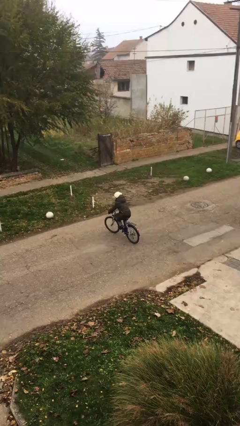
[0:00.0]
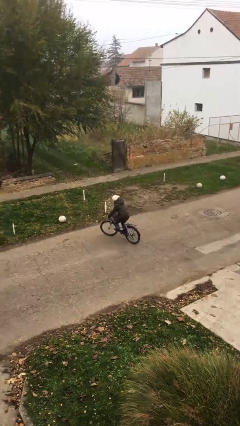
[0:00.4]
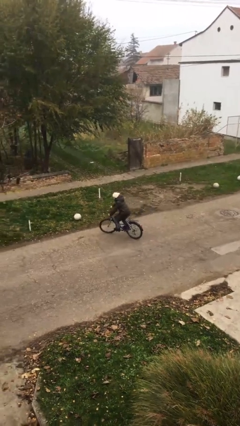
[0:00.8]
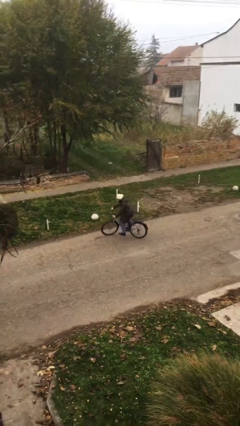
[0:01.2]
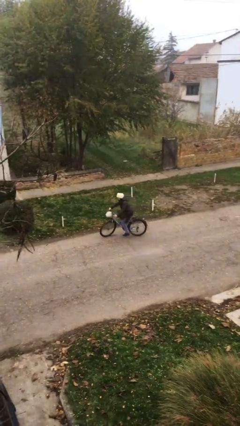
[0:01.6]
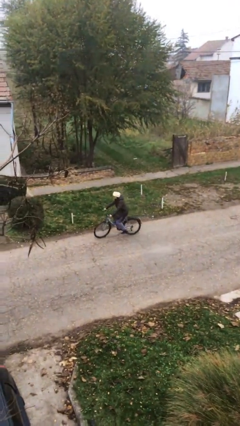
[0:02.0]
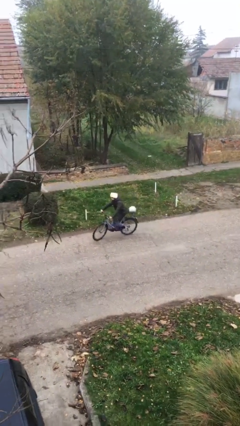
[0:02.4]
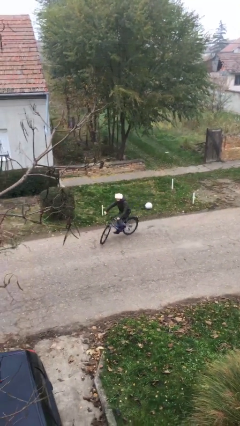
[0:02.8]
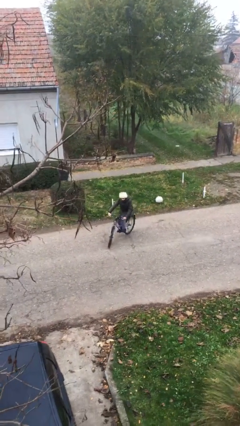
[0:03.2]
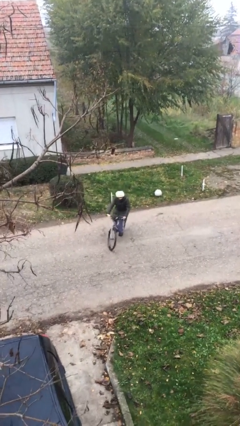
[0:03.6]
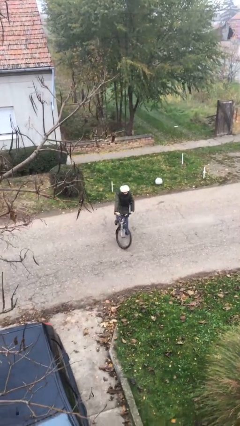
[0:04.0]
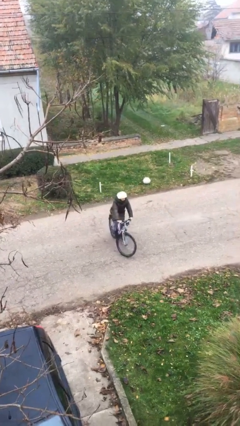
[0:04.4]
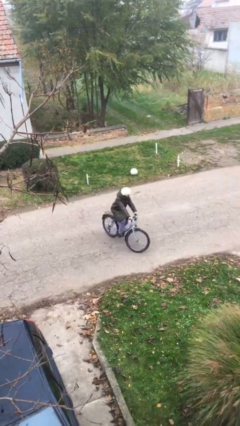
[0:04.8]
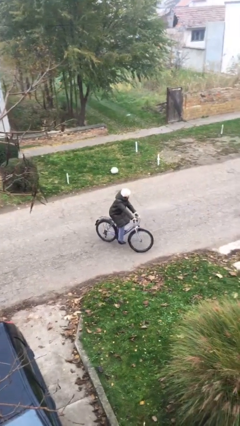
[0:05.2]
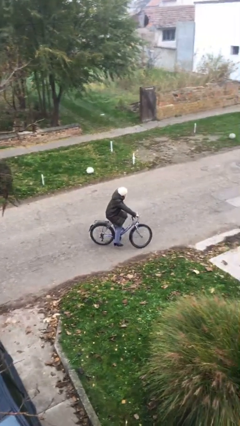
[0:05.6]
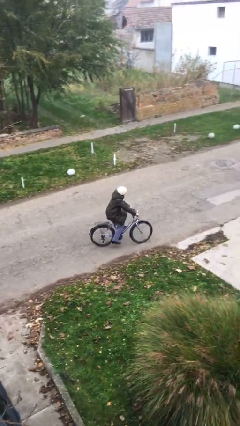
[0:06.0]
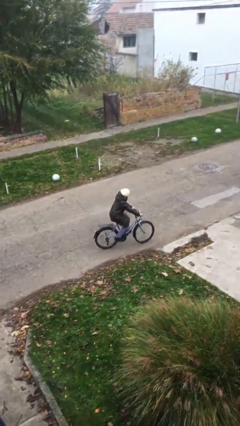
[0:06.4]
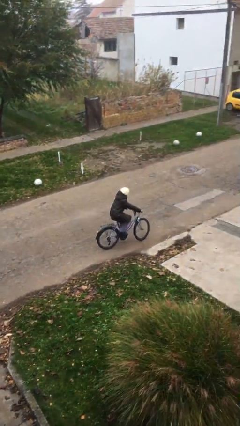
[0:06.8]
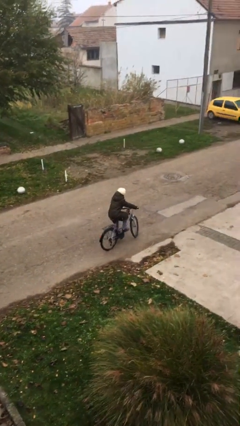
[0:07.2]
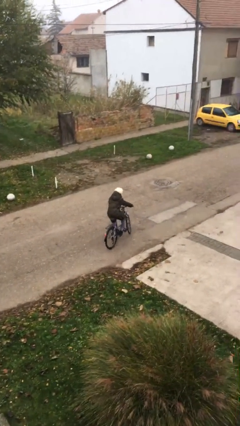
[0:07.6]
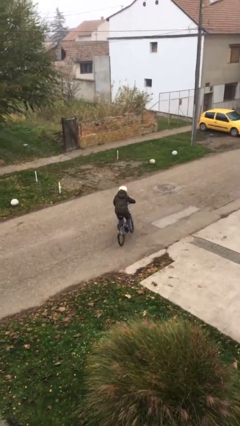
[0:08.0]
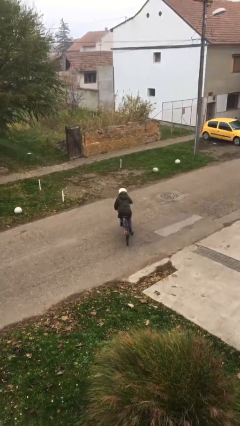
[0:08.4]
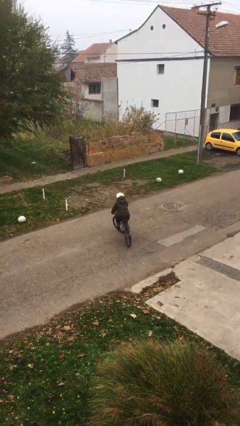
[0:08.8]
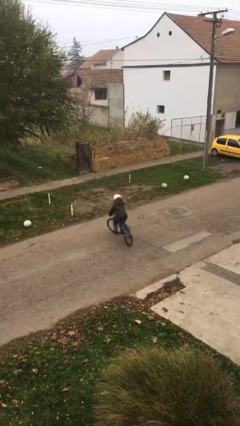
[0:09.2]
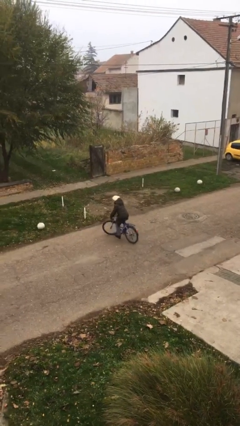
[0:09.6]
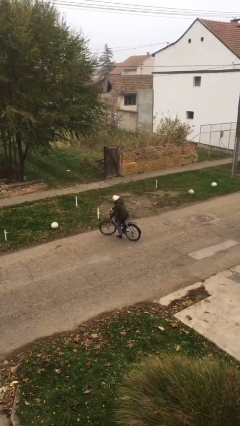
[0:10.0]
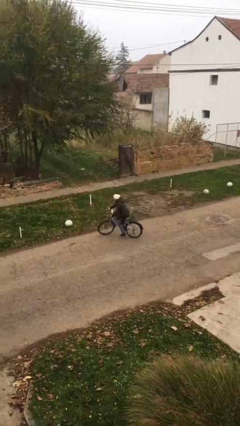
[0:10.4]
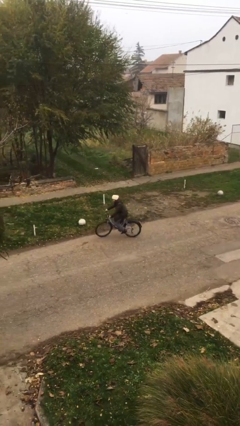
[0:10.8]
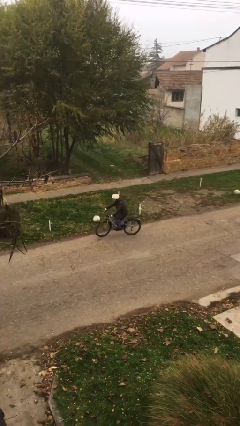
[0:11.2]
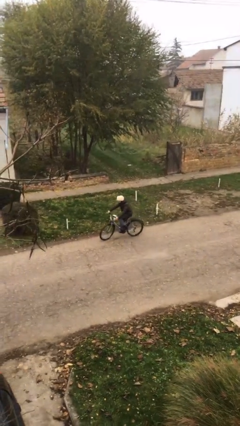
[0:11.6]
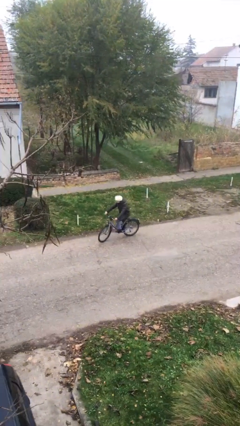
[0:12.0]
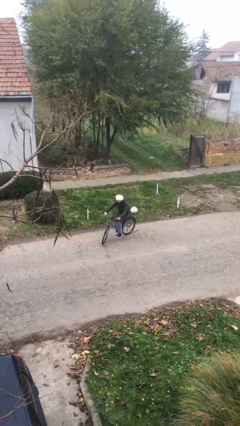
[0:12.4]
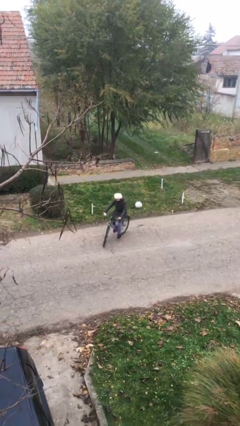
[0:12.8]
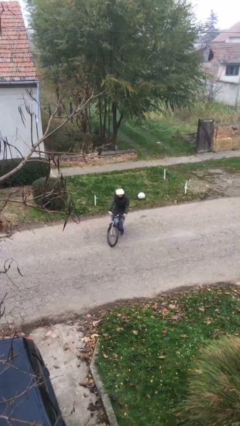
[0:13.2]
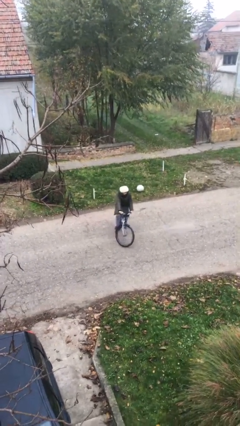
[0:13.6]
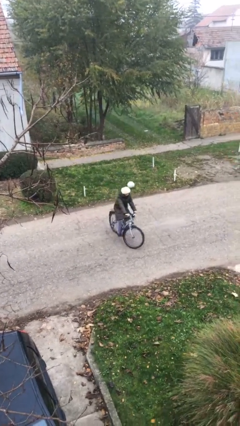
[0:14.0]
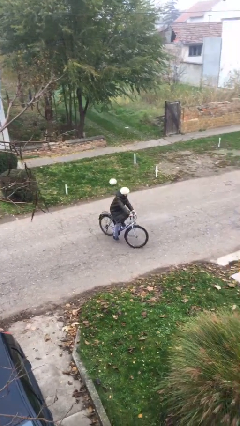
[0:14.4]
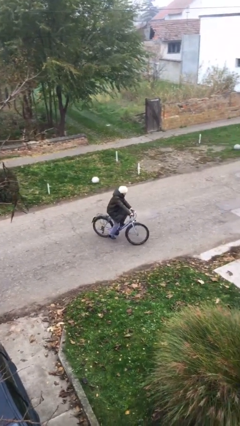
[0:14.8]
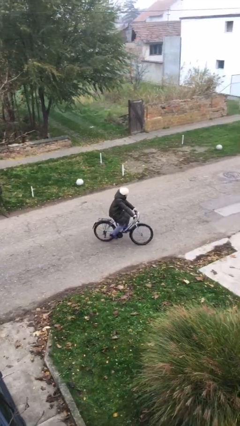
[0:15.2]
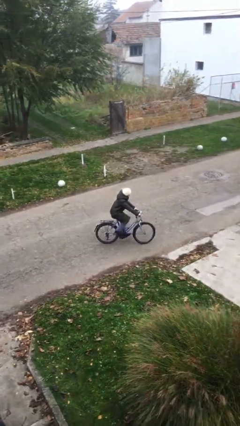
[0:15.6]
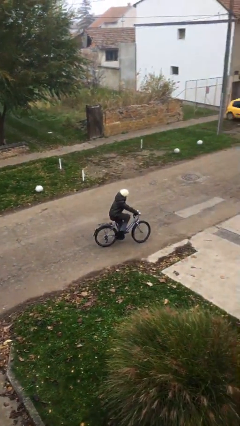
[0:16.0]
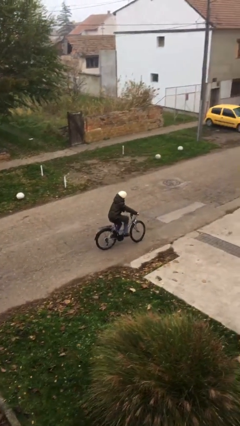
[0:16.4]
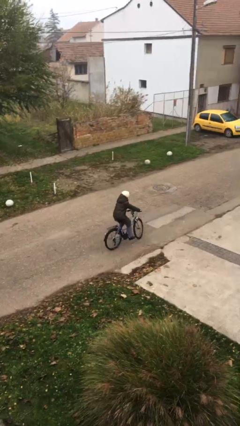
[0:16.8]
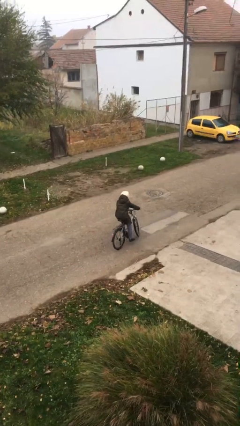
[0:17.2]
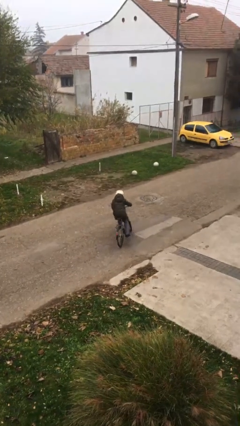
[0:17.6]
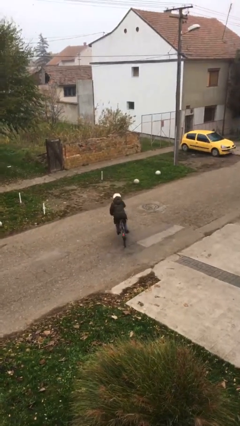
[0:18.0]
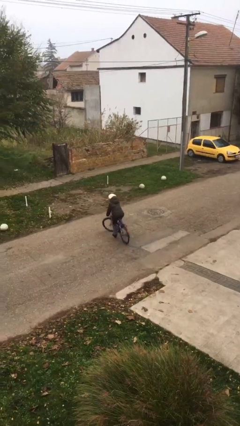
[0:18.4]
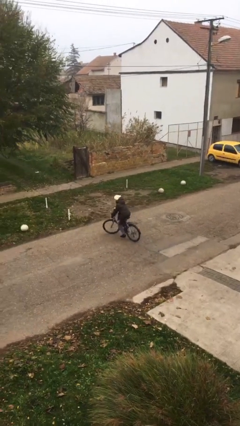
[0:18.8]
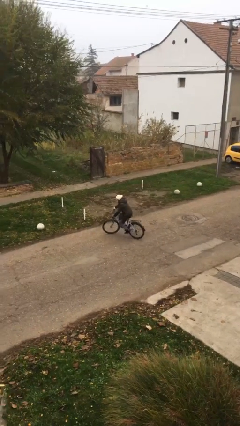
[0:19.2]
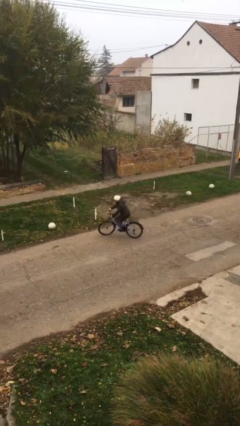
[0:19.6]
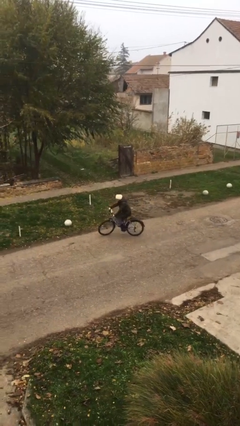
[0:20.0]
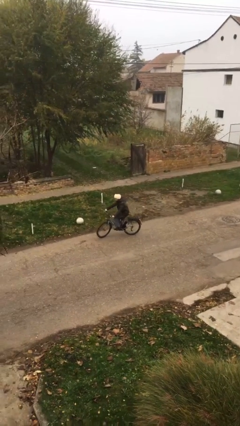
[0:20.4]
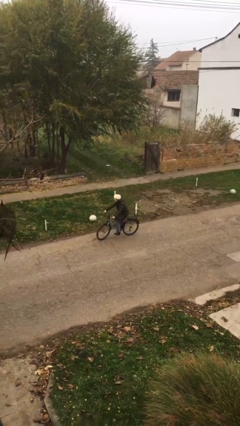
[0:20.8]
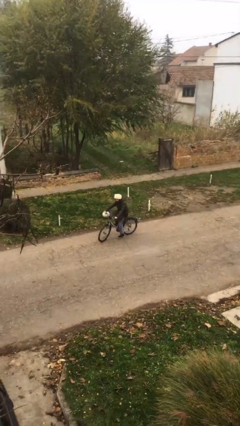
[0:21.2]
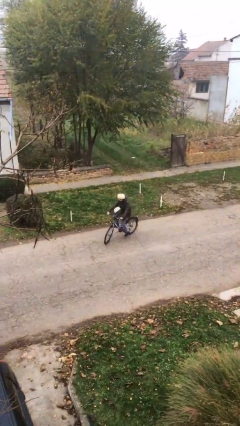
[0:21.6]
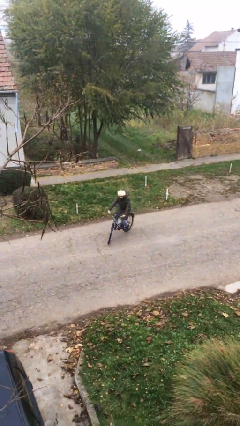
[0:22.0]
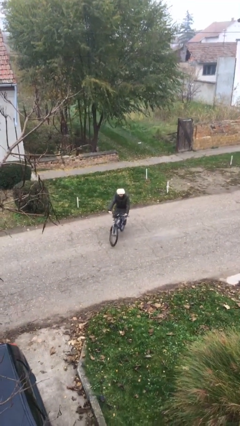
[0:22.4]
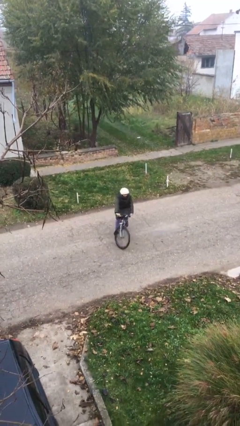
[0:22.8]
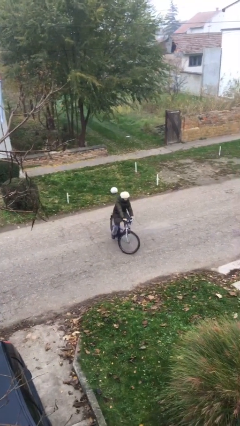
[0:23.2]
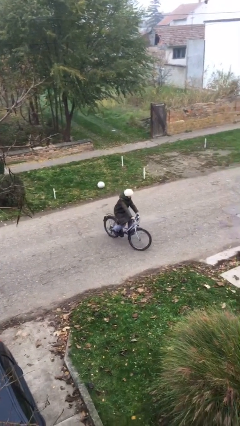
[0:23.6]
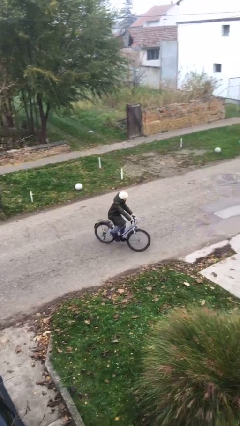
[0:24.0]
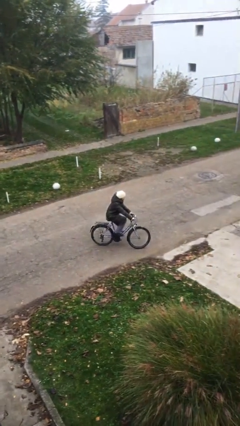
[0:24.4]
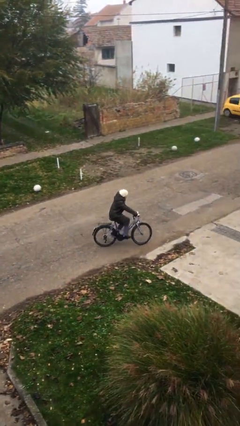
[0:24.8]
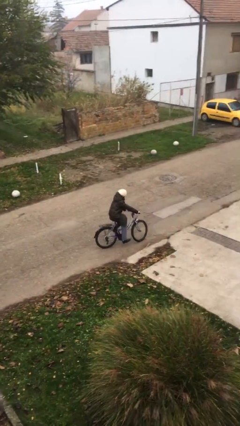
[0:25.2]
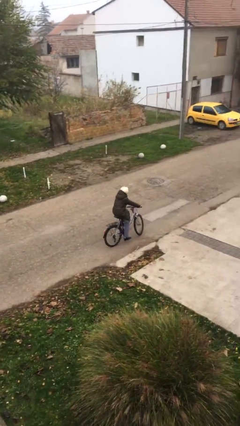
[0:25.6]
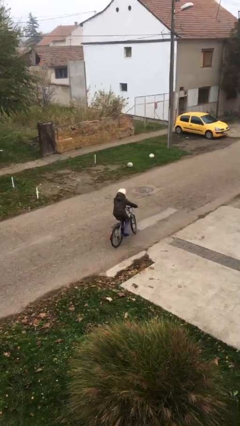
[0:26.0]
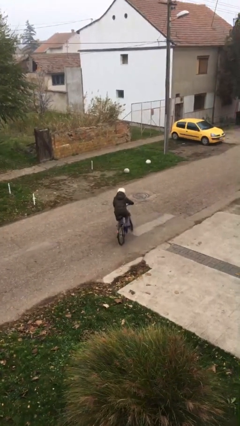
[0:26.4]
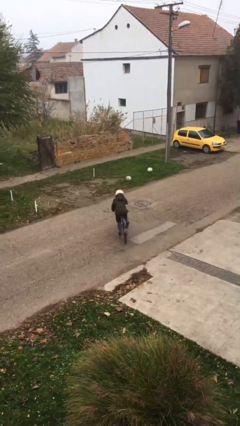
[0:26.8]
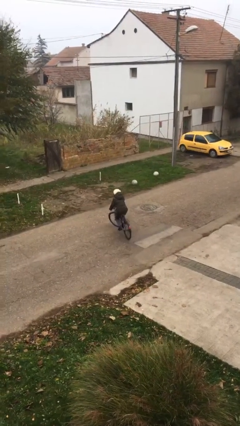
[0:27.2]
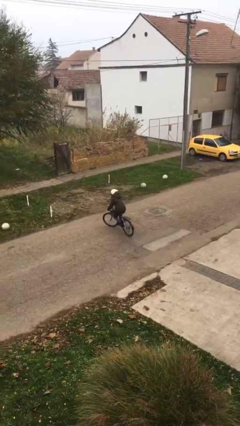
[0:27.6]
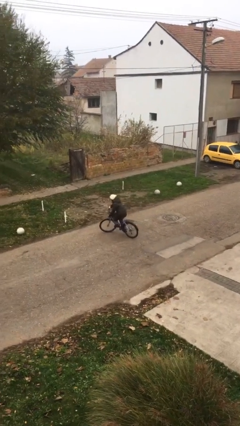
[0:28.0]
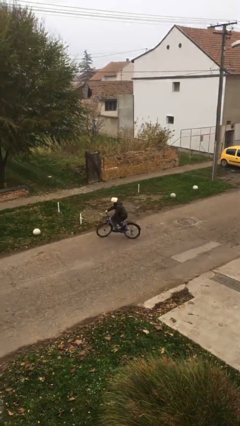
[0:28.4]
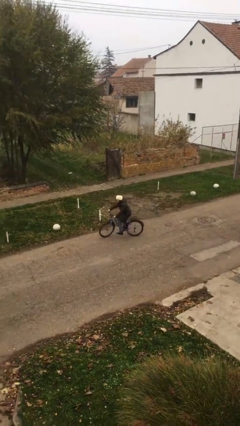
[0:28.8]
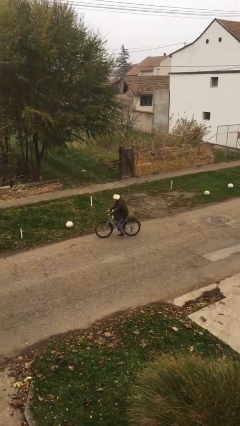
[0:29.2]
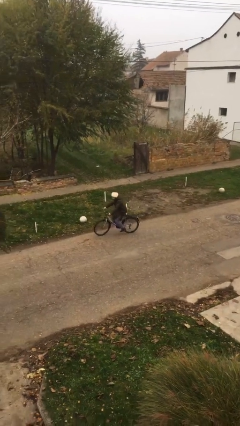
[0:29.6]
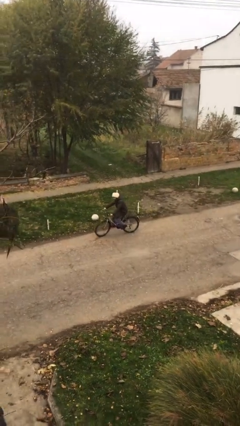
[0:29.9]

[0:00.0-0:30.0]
person rides bicycle

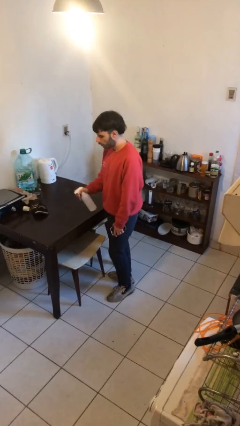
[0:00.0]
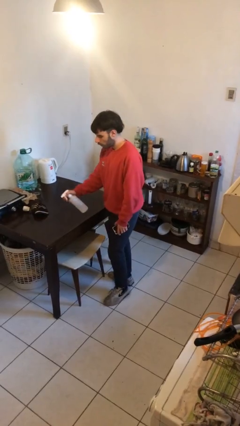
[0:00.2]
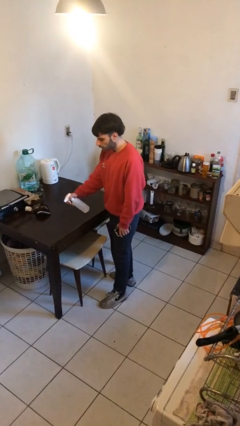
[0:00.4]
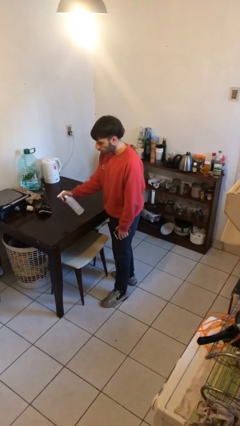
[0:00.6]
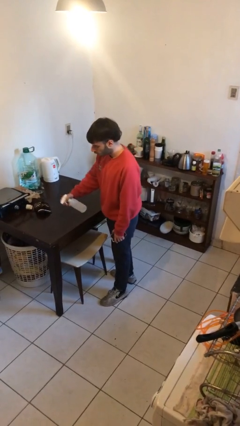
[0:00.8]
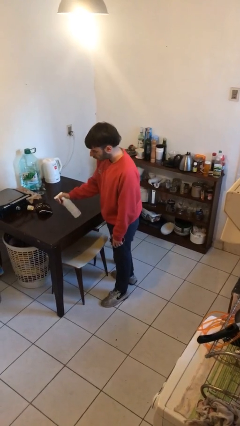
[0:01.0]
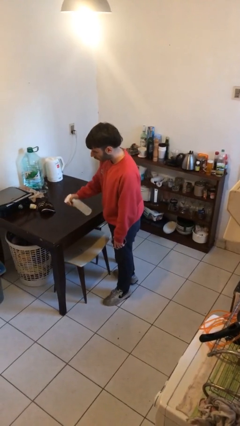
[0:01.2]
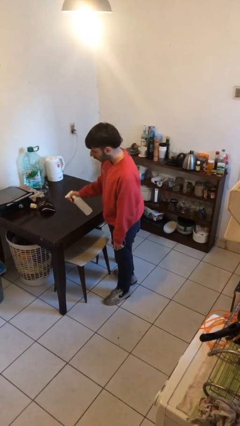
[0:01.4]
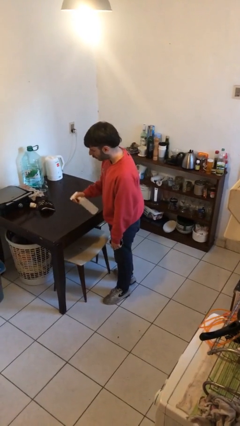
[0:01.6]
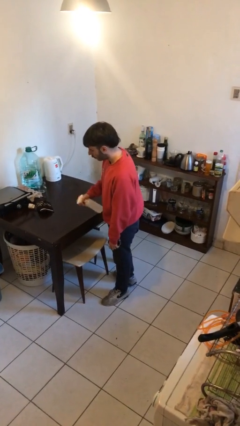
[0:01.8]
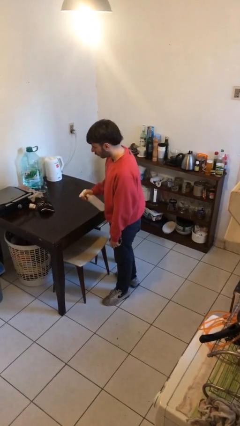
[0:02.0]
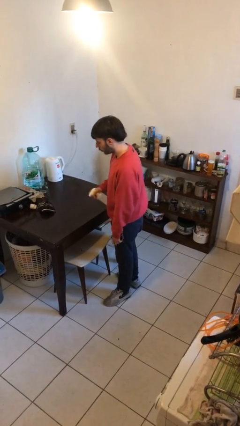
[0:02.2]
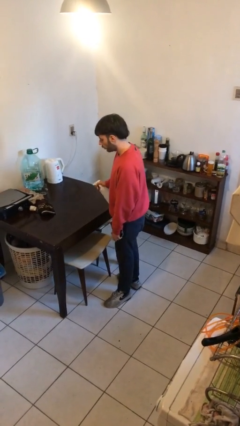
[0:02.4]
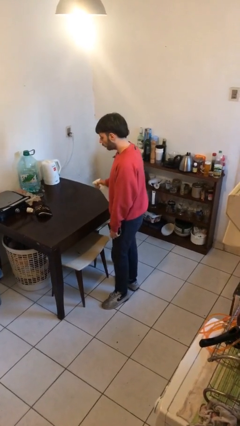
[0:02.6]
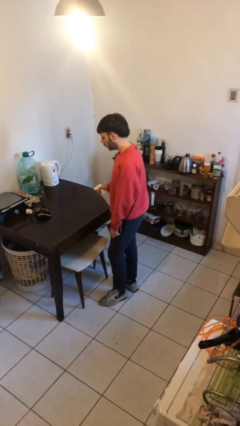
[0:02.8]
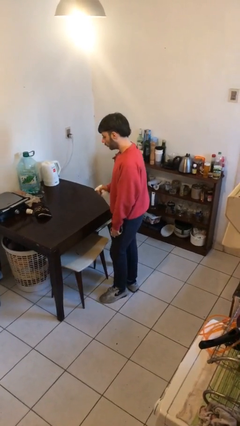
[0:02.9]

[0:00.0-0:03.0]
person sprays from bottle

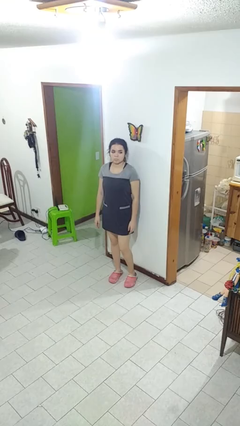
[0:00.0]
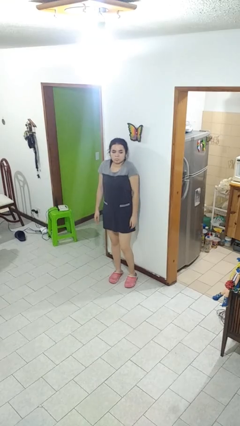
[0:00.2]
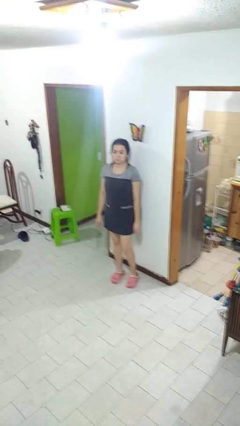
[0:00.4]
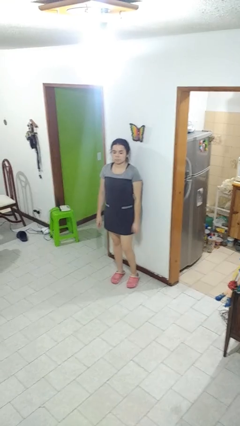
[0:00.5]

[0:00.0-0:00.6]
person shrugs
